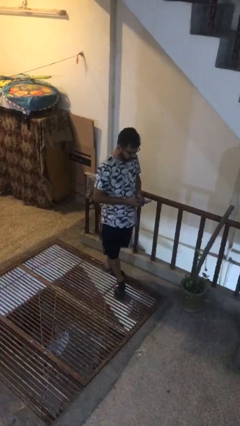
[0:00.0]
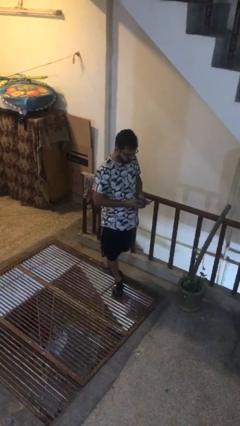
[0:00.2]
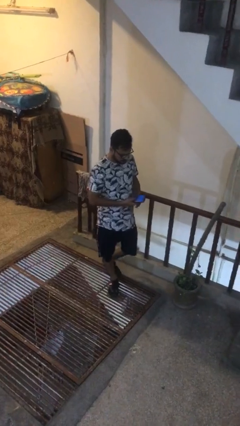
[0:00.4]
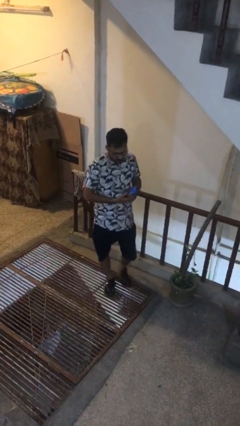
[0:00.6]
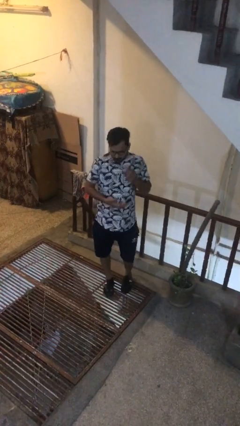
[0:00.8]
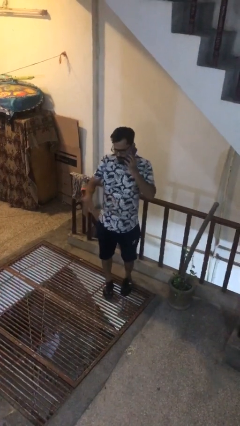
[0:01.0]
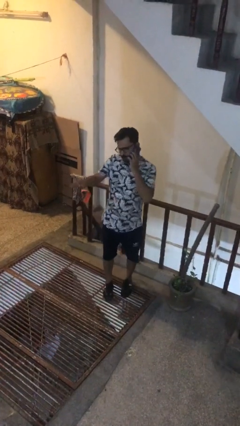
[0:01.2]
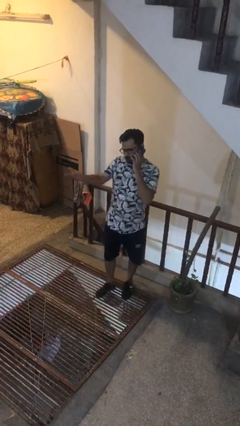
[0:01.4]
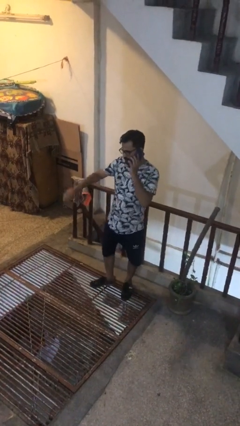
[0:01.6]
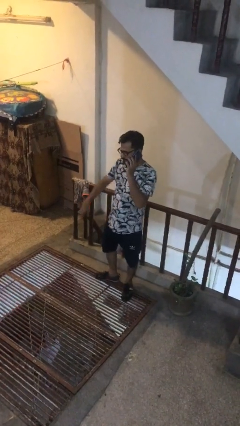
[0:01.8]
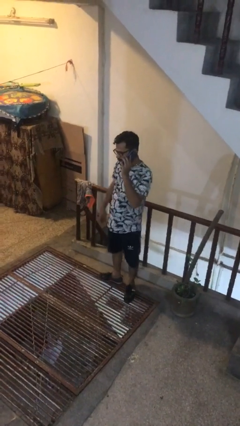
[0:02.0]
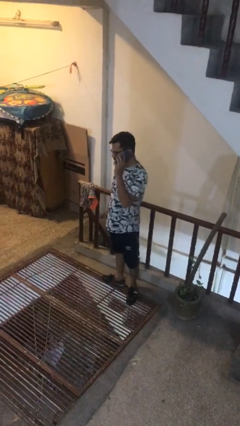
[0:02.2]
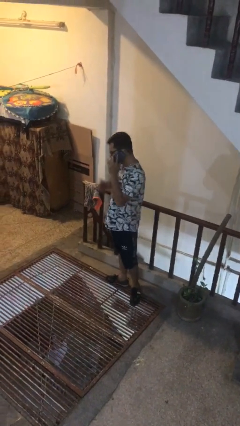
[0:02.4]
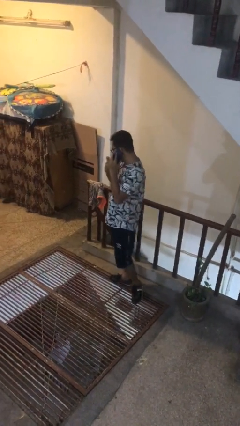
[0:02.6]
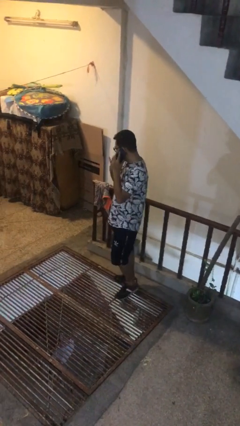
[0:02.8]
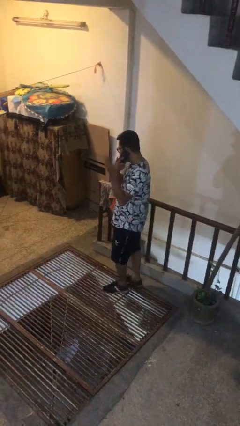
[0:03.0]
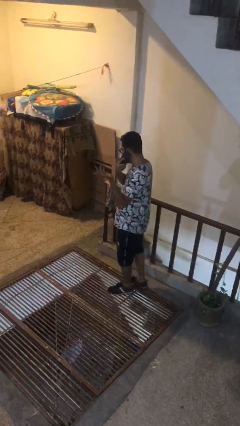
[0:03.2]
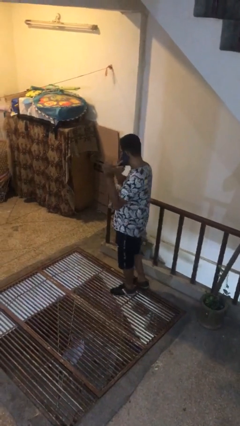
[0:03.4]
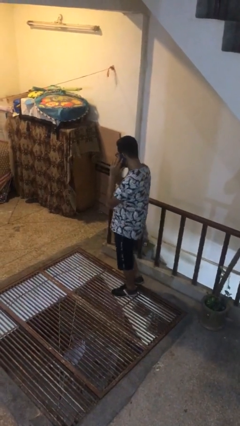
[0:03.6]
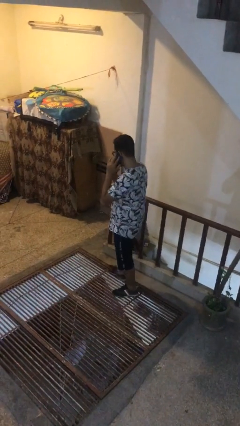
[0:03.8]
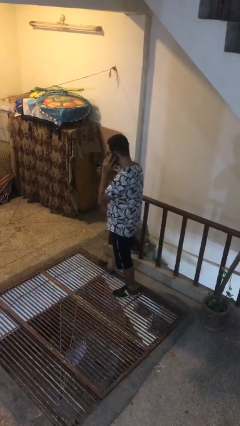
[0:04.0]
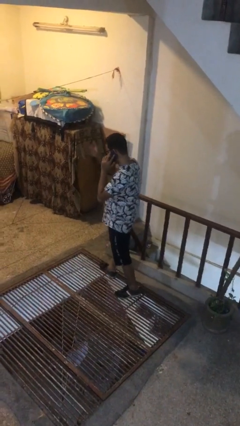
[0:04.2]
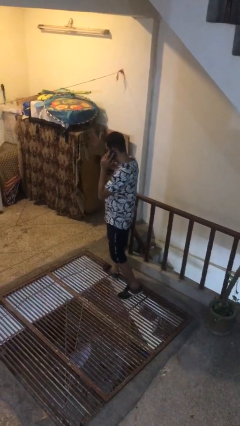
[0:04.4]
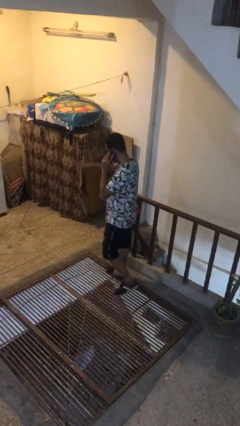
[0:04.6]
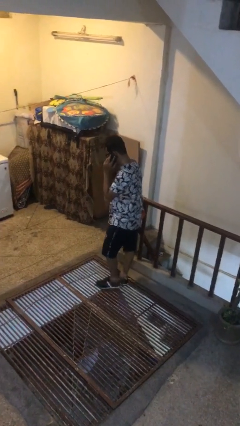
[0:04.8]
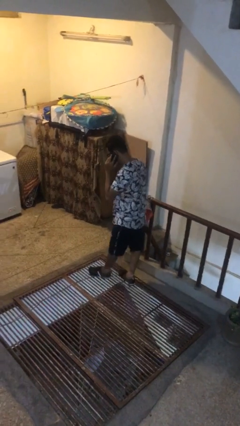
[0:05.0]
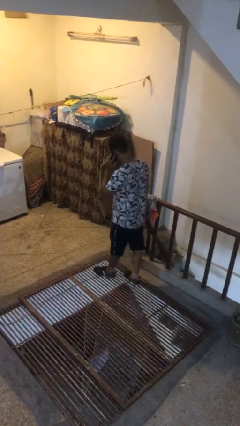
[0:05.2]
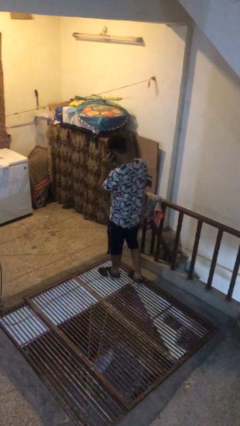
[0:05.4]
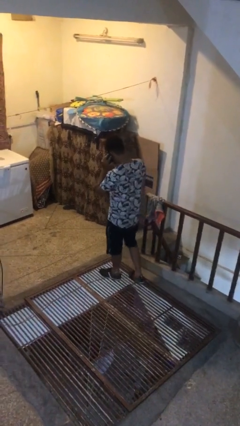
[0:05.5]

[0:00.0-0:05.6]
person talks on phone

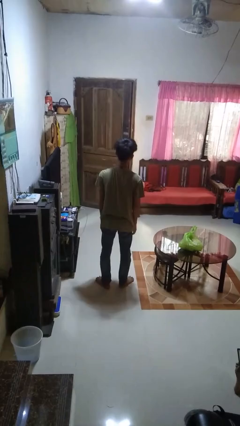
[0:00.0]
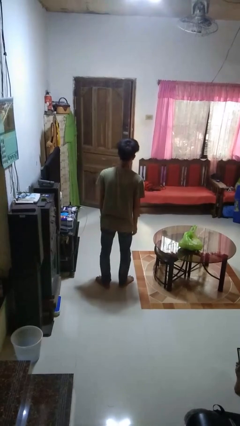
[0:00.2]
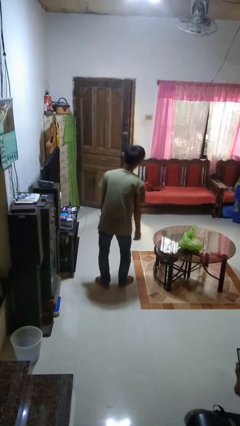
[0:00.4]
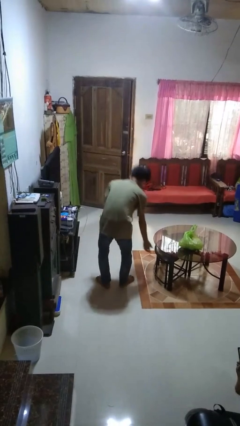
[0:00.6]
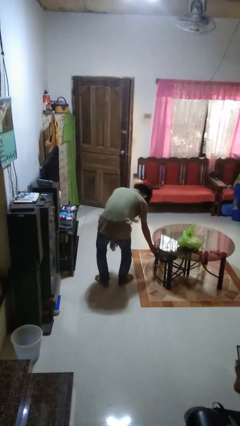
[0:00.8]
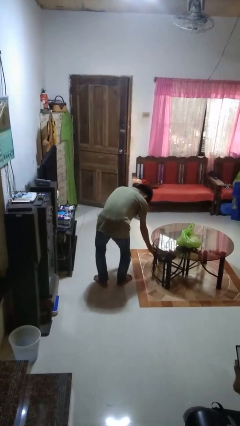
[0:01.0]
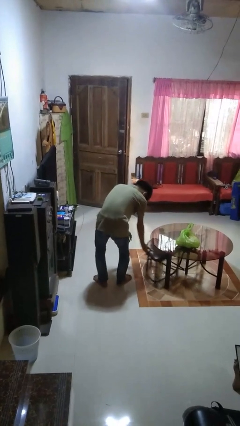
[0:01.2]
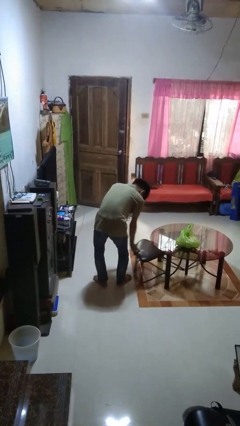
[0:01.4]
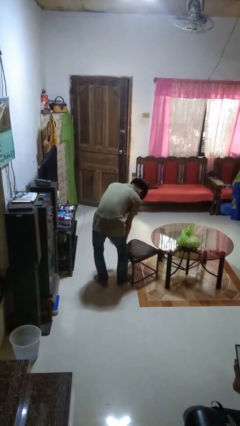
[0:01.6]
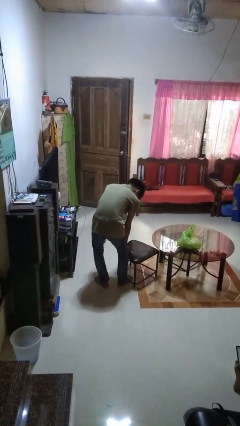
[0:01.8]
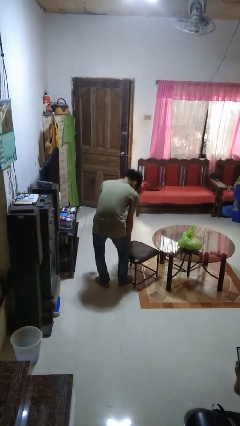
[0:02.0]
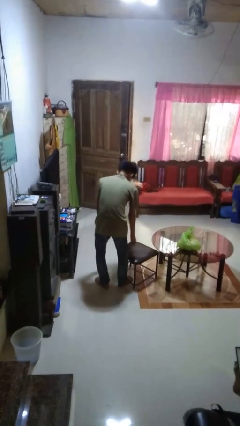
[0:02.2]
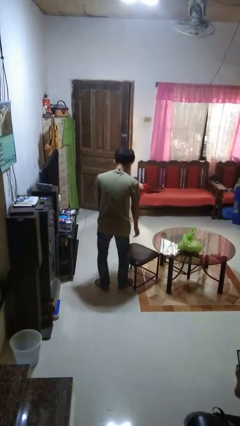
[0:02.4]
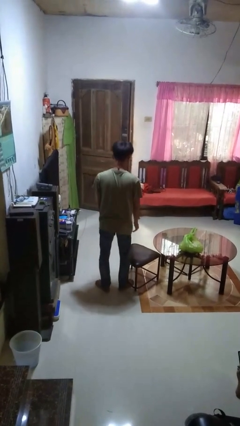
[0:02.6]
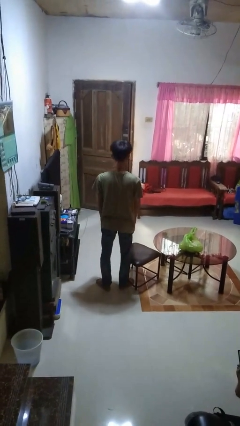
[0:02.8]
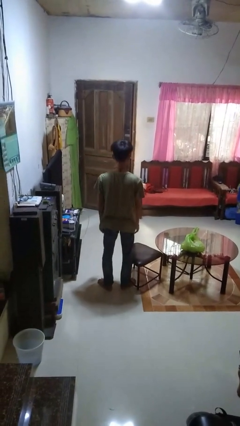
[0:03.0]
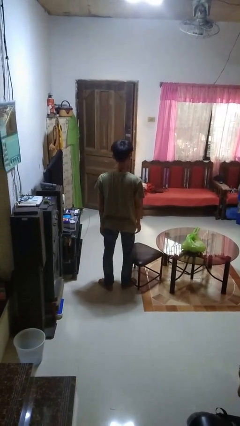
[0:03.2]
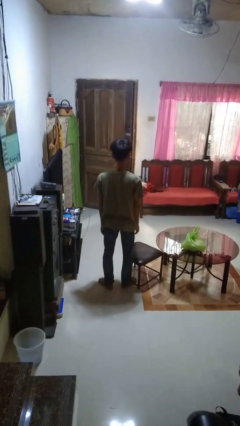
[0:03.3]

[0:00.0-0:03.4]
person pulls out chair

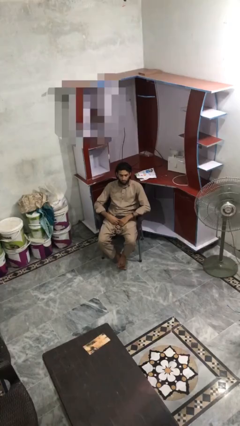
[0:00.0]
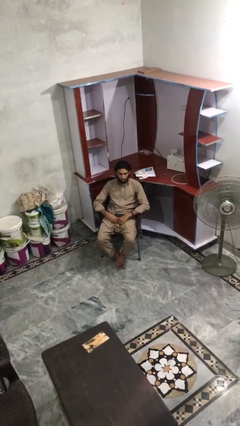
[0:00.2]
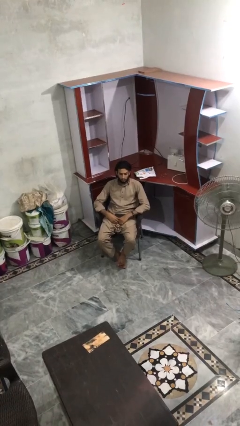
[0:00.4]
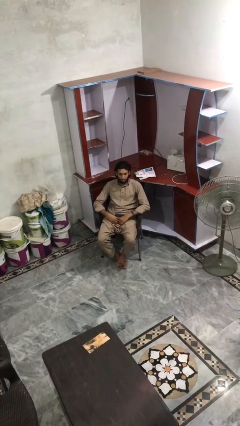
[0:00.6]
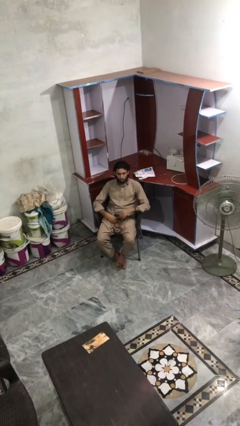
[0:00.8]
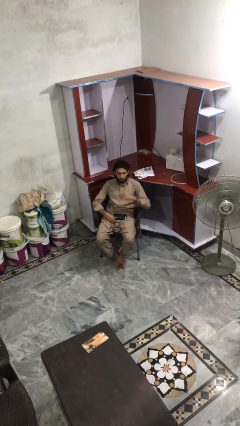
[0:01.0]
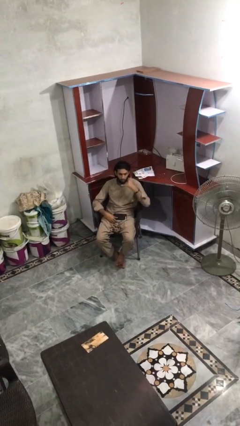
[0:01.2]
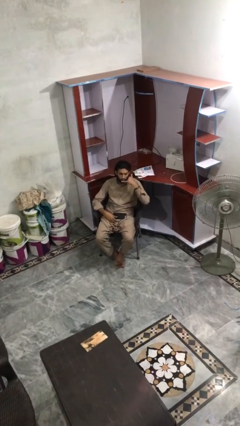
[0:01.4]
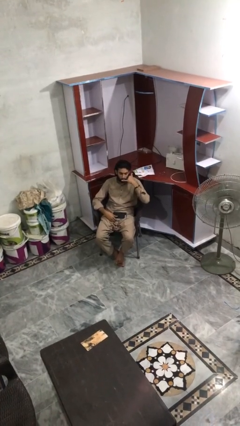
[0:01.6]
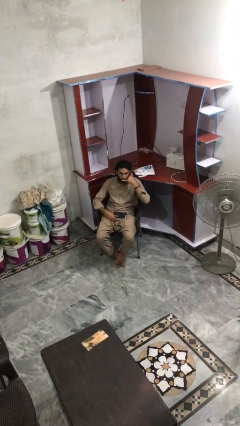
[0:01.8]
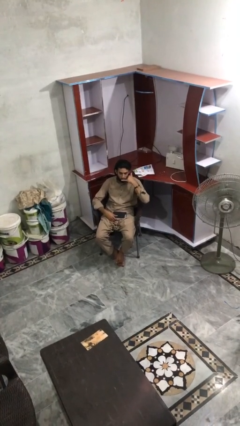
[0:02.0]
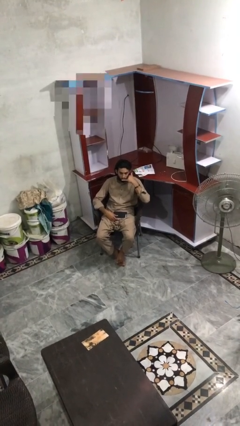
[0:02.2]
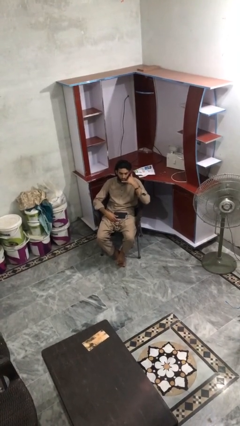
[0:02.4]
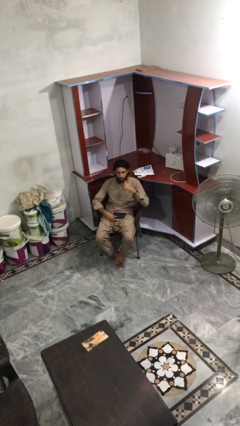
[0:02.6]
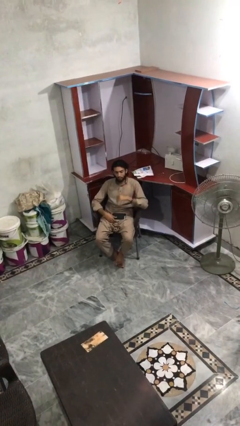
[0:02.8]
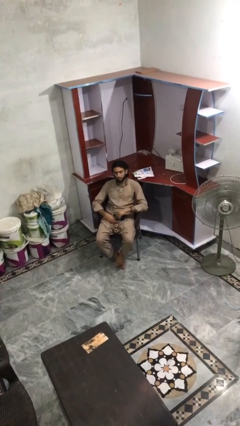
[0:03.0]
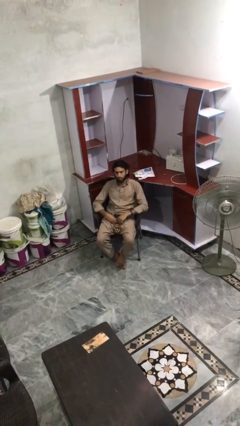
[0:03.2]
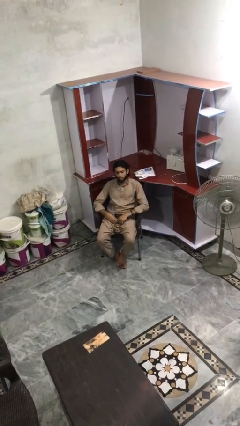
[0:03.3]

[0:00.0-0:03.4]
person gestures call me

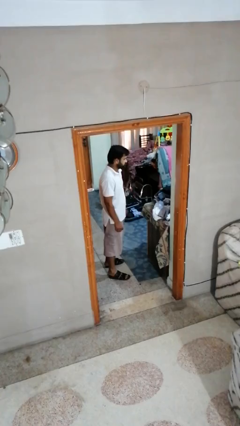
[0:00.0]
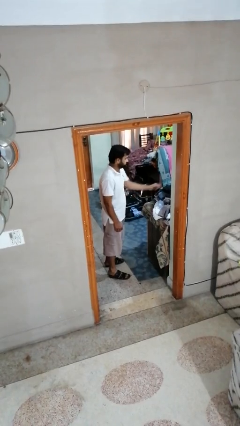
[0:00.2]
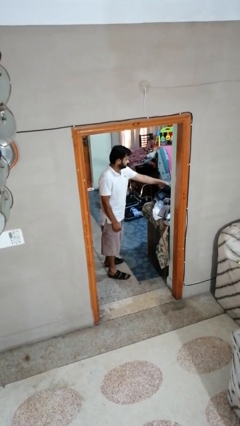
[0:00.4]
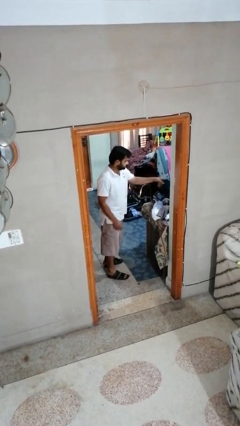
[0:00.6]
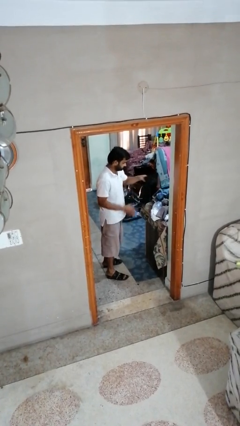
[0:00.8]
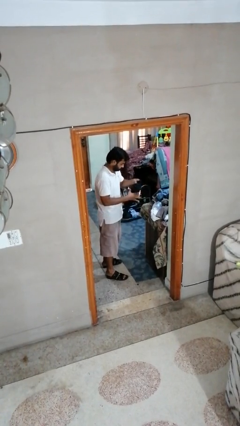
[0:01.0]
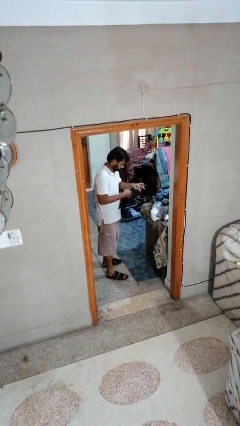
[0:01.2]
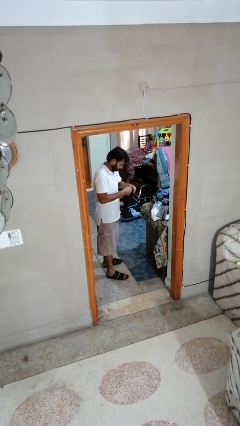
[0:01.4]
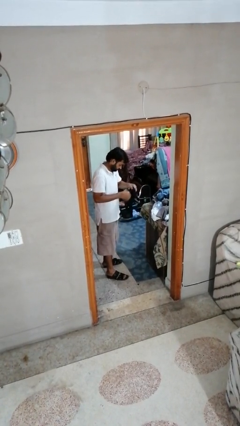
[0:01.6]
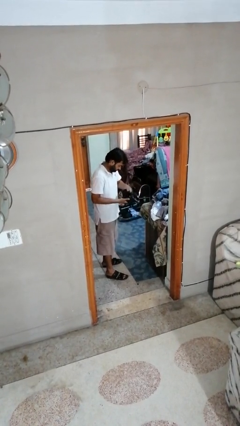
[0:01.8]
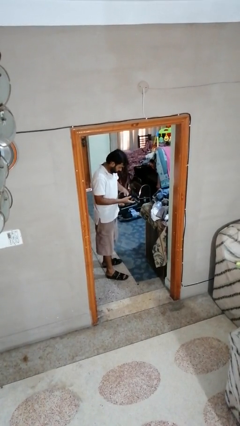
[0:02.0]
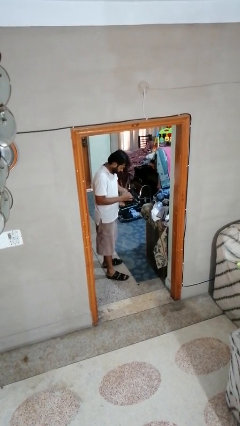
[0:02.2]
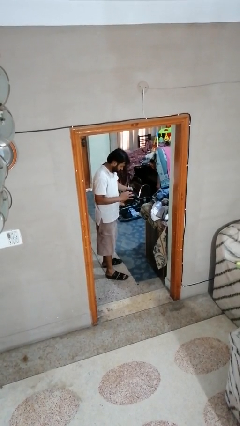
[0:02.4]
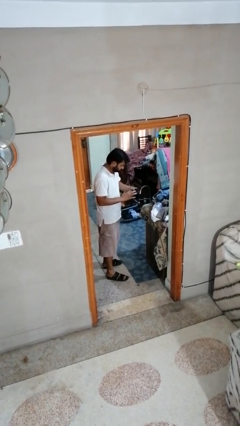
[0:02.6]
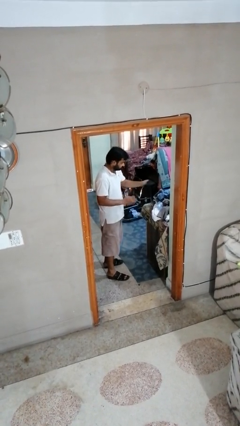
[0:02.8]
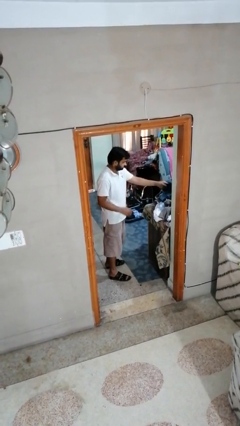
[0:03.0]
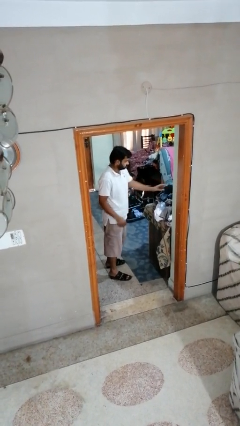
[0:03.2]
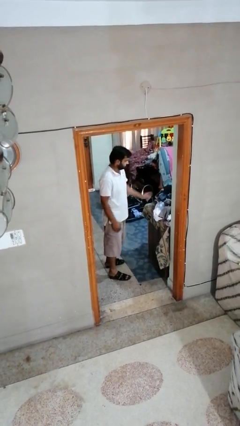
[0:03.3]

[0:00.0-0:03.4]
person folds socks

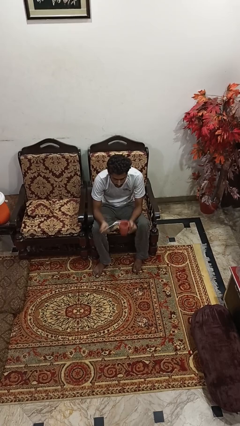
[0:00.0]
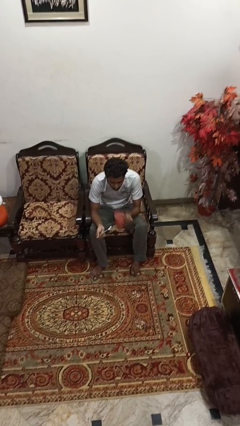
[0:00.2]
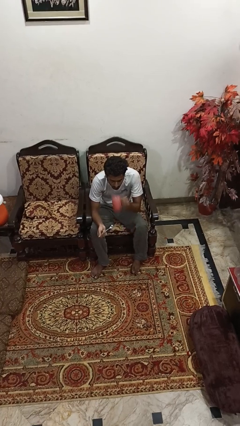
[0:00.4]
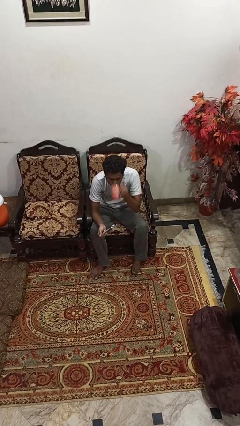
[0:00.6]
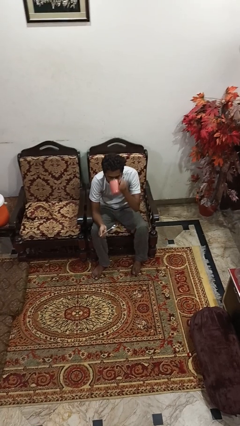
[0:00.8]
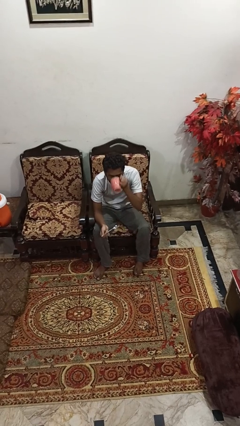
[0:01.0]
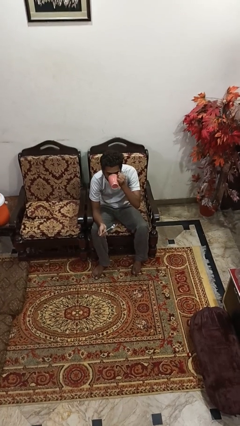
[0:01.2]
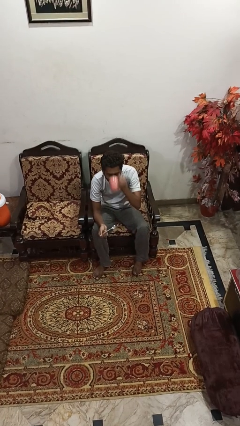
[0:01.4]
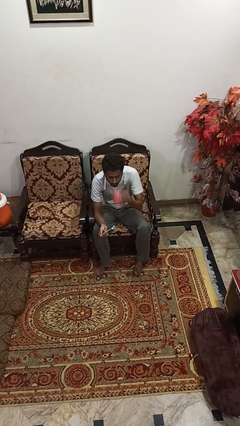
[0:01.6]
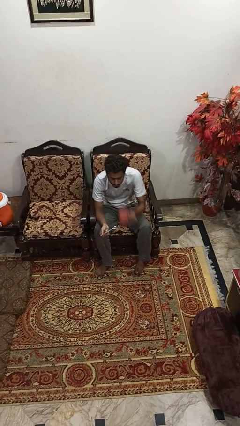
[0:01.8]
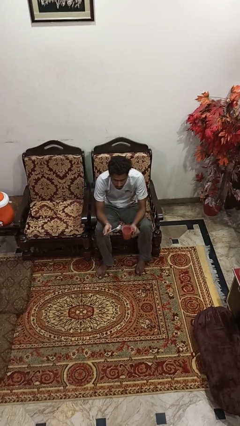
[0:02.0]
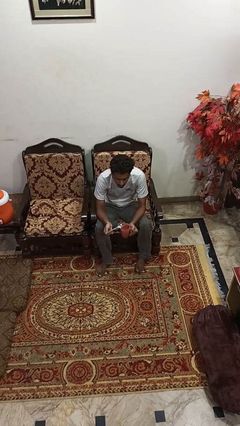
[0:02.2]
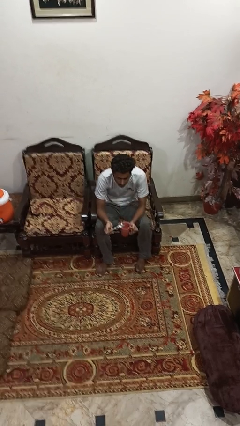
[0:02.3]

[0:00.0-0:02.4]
person drinks from mug
